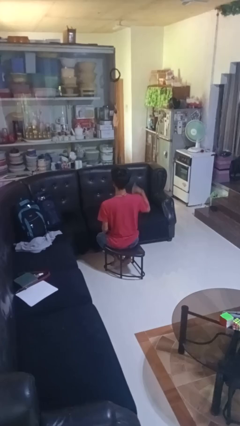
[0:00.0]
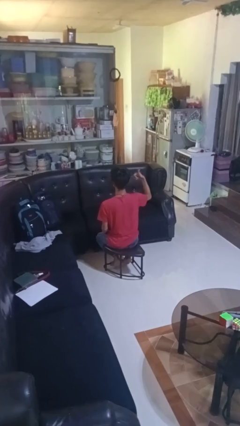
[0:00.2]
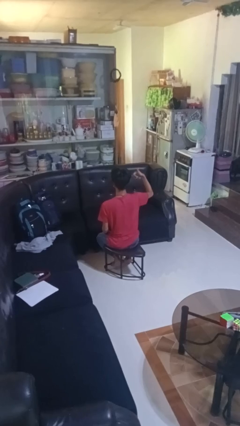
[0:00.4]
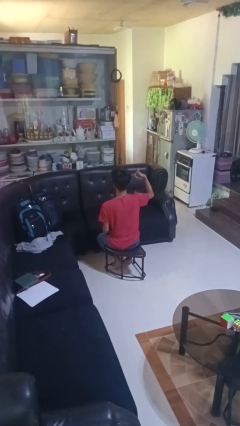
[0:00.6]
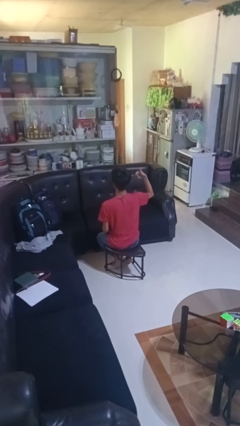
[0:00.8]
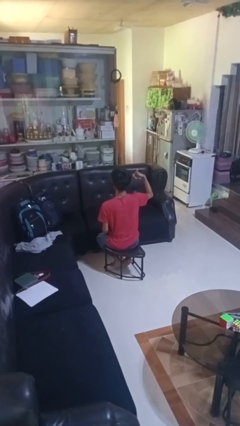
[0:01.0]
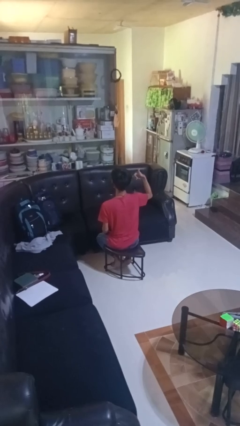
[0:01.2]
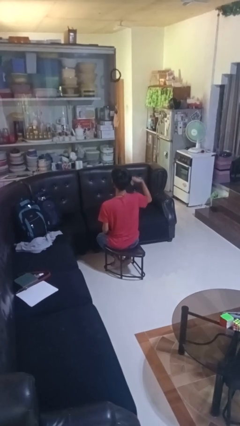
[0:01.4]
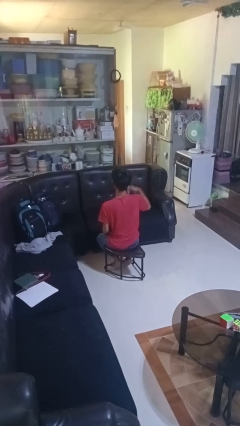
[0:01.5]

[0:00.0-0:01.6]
person gestures hang loose

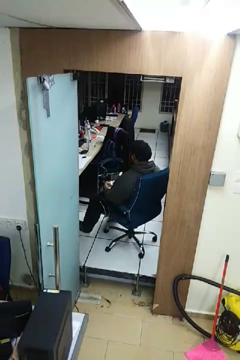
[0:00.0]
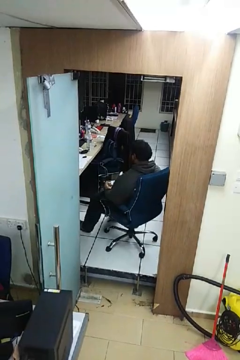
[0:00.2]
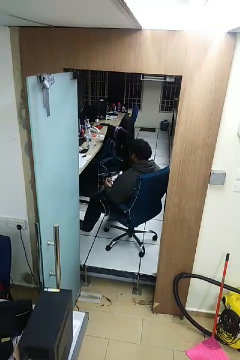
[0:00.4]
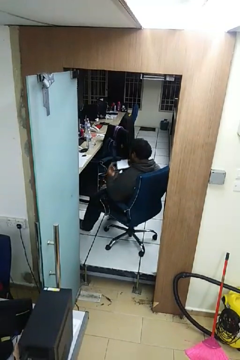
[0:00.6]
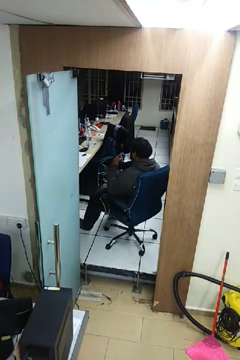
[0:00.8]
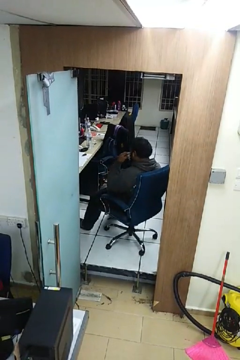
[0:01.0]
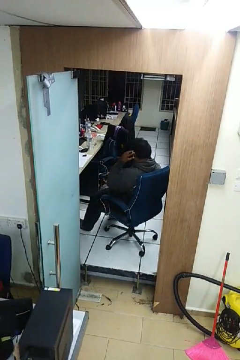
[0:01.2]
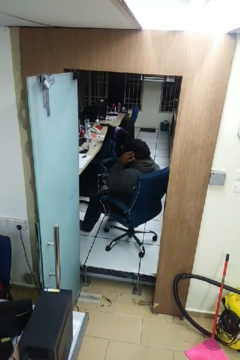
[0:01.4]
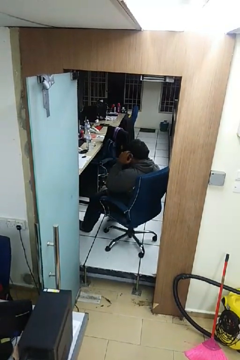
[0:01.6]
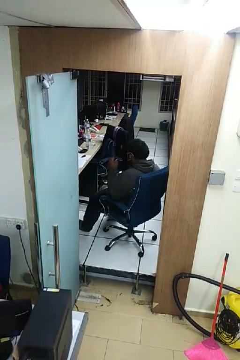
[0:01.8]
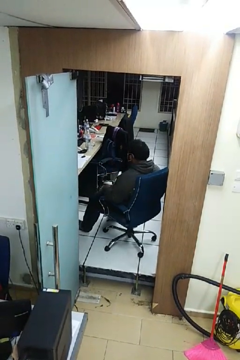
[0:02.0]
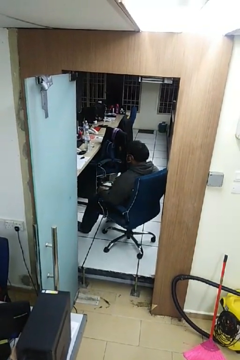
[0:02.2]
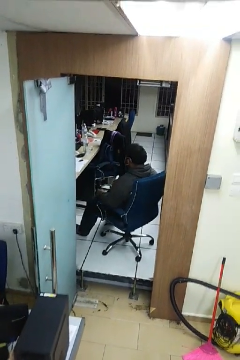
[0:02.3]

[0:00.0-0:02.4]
person puts on facemask

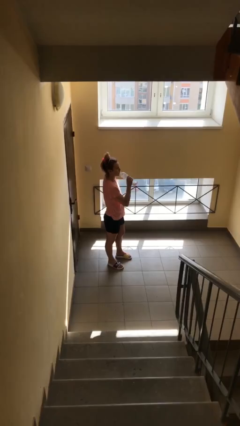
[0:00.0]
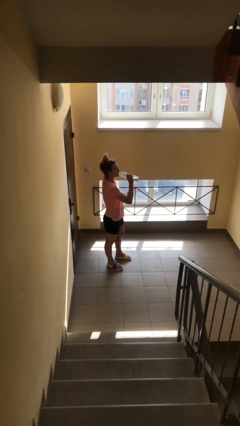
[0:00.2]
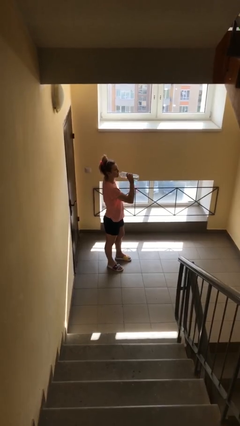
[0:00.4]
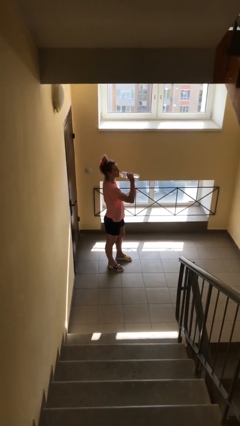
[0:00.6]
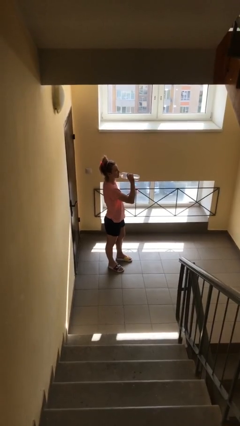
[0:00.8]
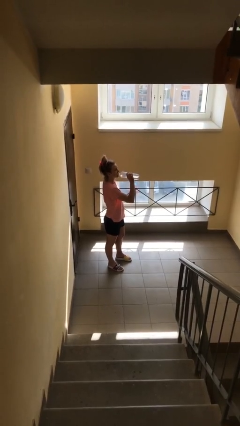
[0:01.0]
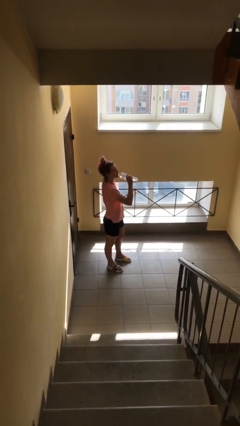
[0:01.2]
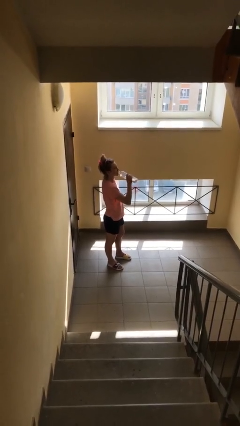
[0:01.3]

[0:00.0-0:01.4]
person drinks from bottle

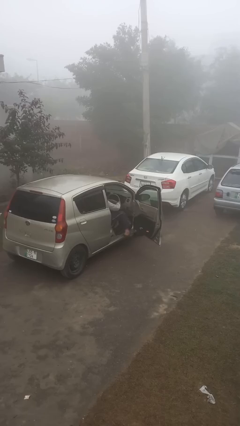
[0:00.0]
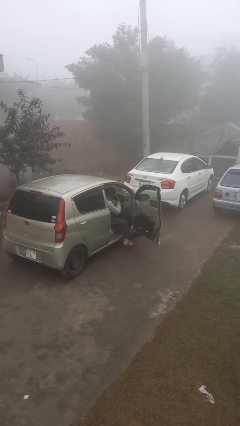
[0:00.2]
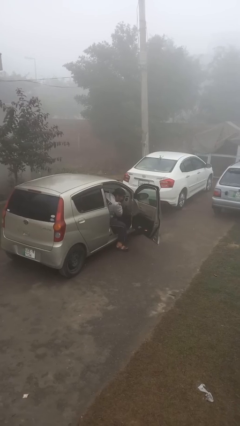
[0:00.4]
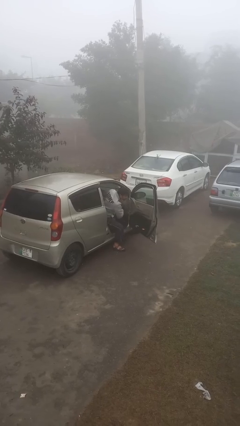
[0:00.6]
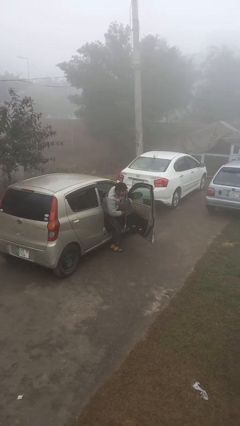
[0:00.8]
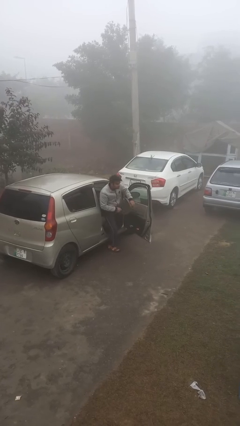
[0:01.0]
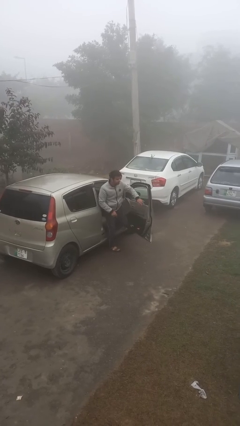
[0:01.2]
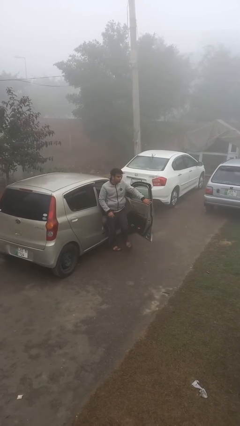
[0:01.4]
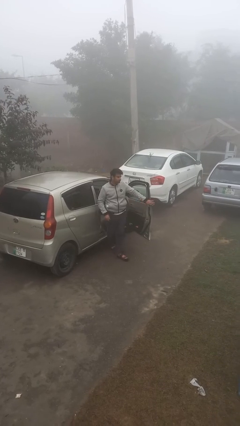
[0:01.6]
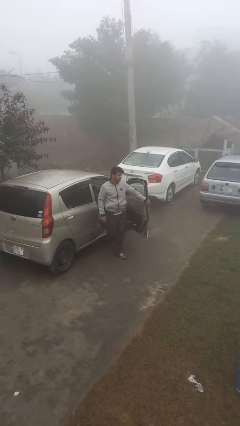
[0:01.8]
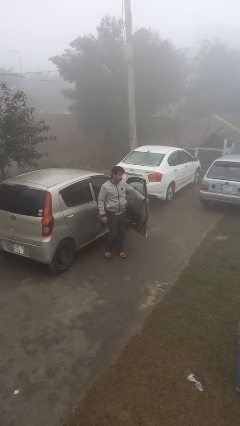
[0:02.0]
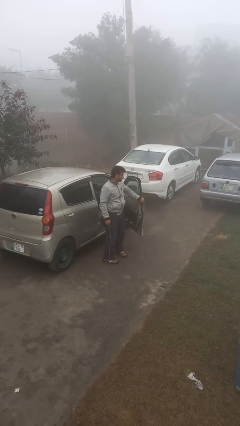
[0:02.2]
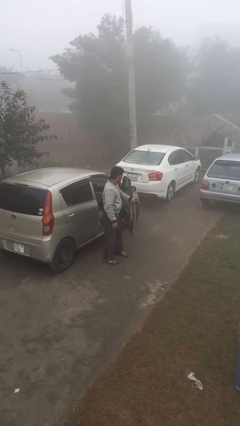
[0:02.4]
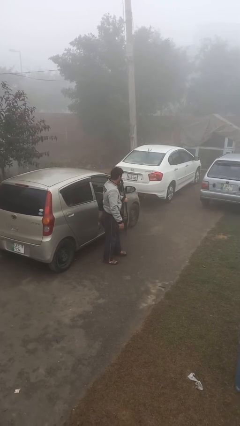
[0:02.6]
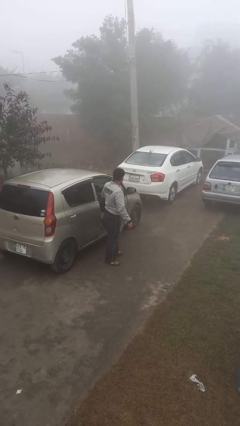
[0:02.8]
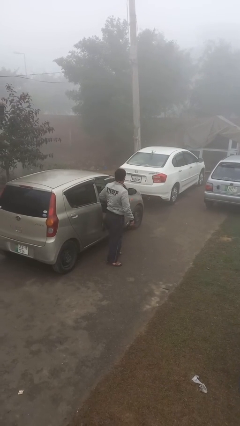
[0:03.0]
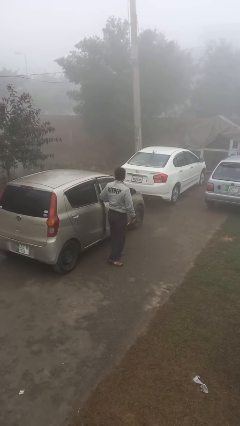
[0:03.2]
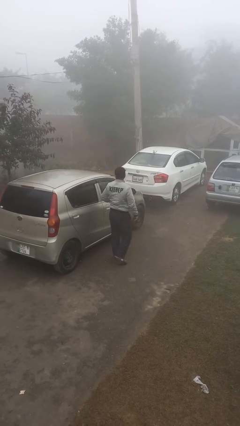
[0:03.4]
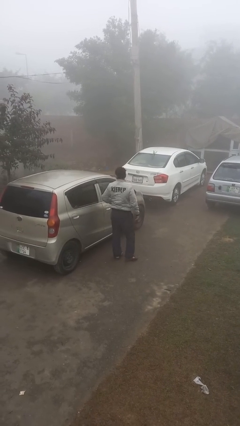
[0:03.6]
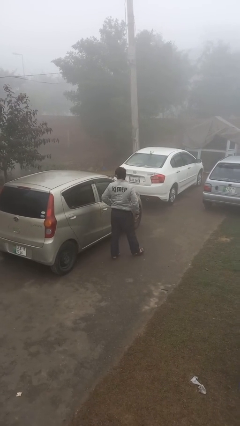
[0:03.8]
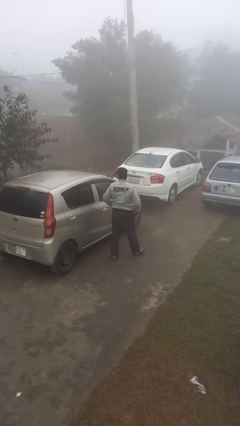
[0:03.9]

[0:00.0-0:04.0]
person exits car

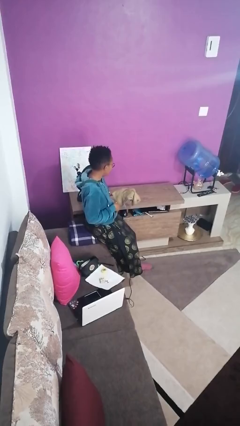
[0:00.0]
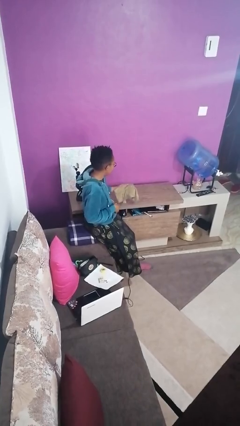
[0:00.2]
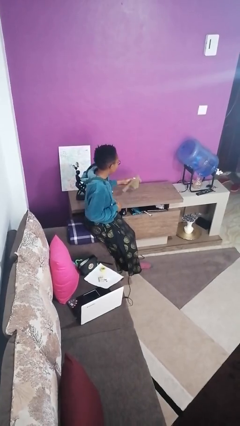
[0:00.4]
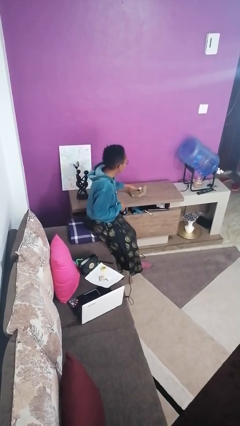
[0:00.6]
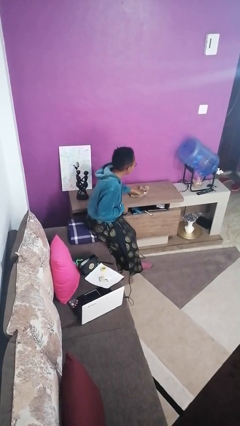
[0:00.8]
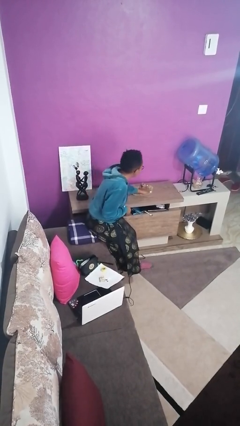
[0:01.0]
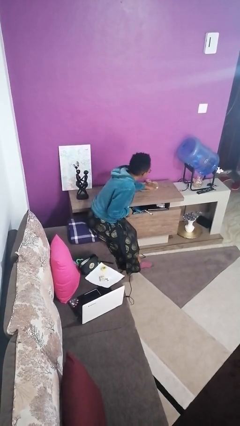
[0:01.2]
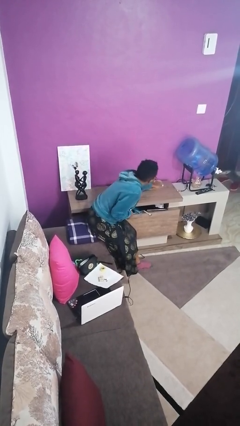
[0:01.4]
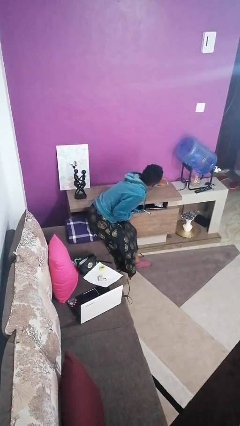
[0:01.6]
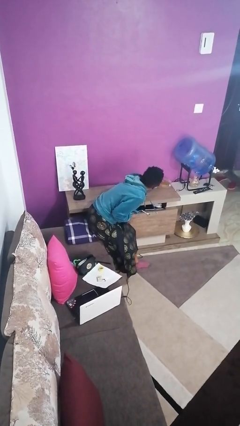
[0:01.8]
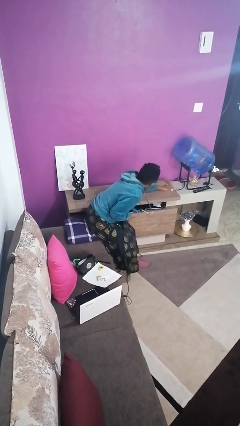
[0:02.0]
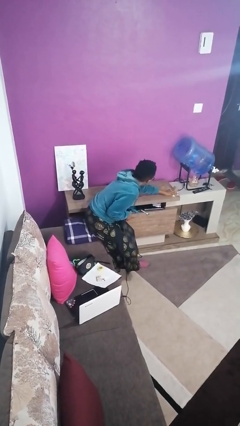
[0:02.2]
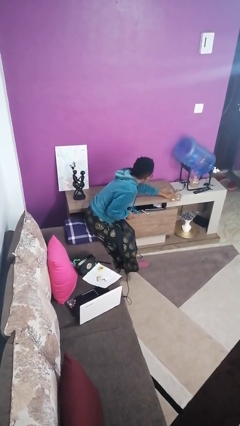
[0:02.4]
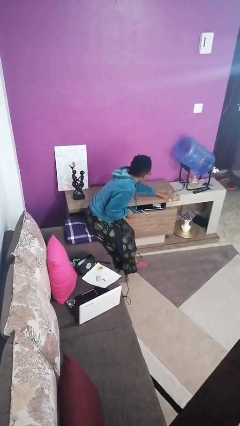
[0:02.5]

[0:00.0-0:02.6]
person cleans table with rag

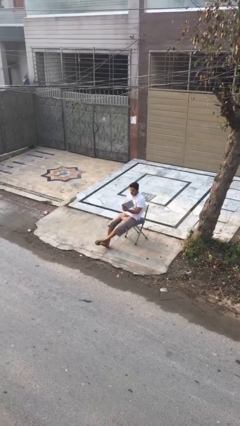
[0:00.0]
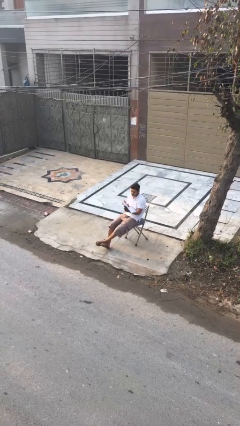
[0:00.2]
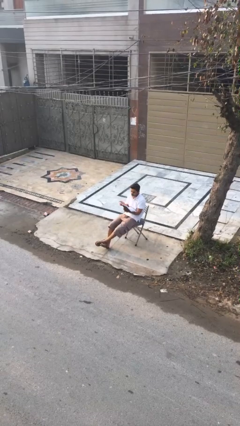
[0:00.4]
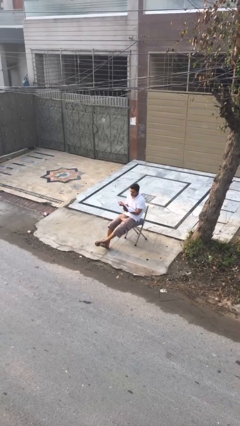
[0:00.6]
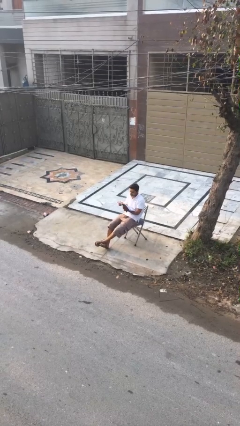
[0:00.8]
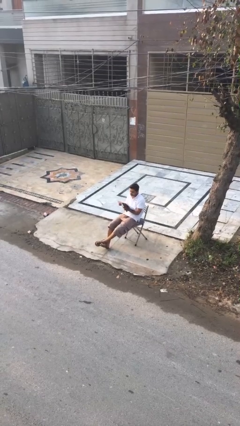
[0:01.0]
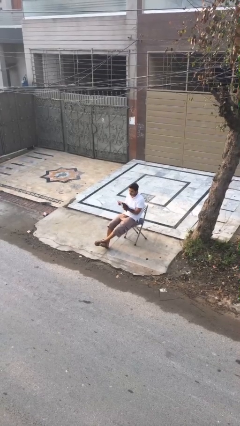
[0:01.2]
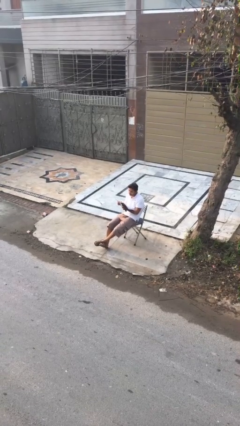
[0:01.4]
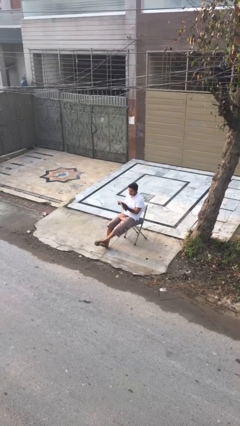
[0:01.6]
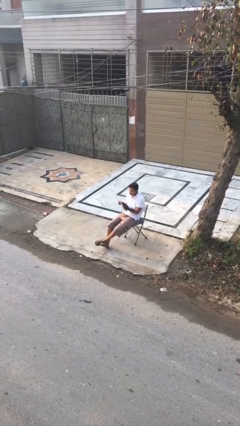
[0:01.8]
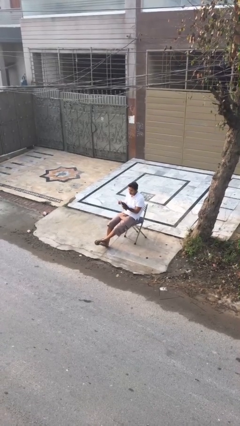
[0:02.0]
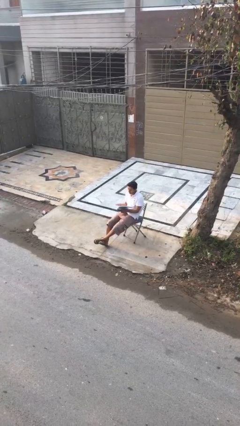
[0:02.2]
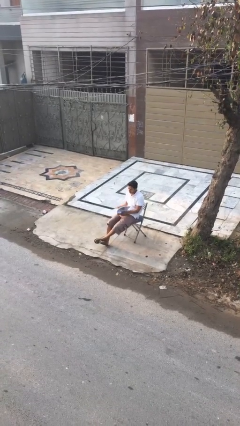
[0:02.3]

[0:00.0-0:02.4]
person reads document

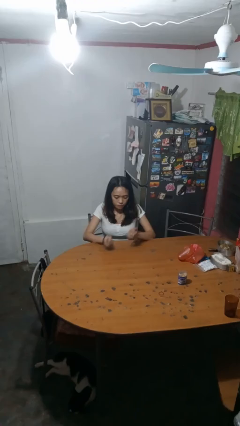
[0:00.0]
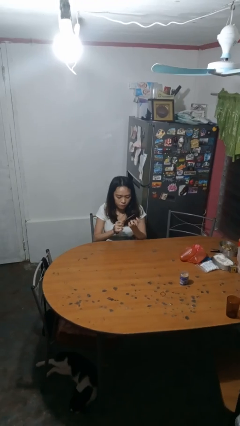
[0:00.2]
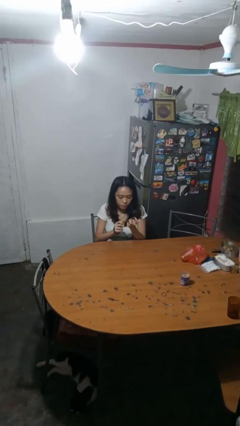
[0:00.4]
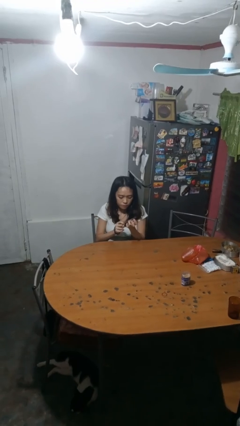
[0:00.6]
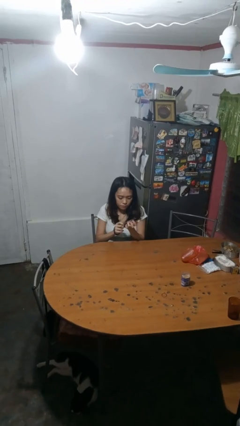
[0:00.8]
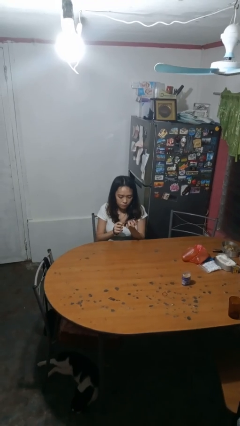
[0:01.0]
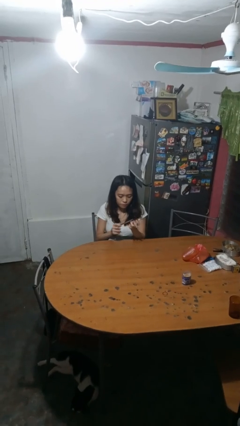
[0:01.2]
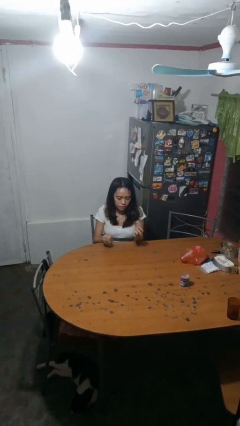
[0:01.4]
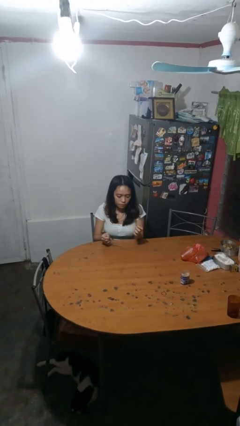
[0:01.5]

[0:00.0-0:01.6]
person files fingernails

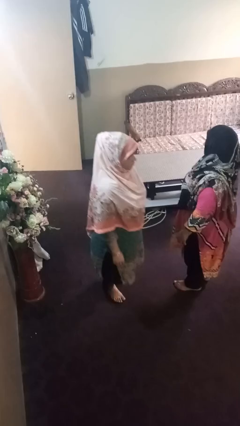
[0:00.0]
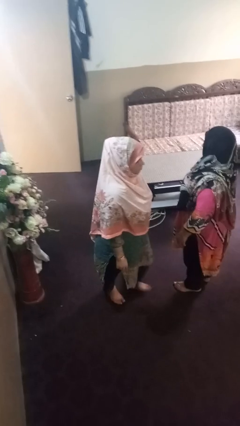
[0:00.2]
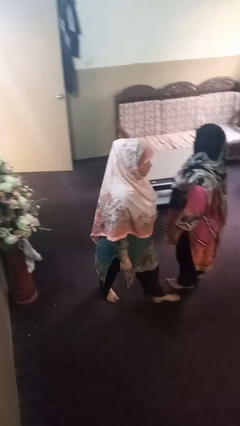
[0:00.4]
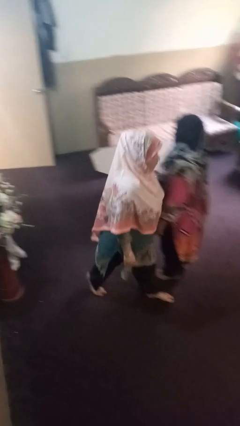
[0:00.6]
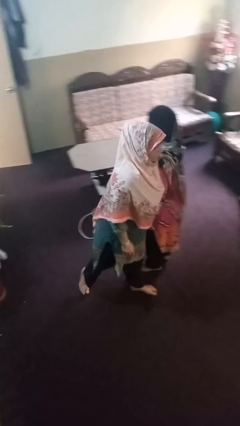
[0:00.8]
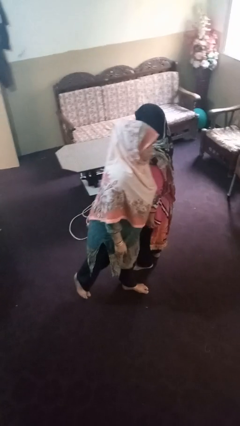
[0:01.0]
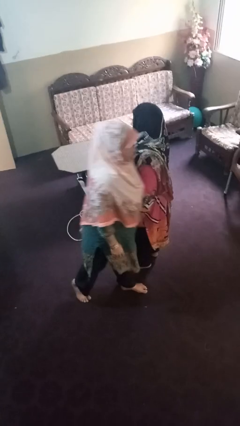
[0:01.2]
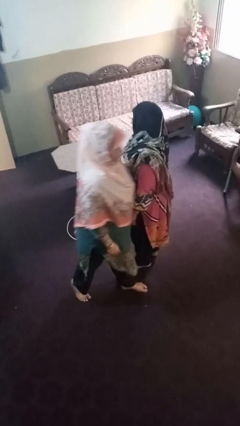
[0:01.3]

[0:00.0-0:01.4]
person shoves person
